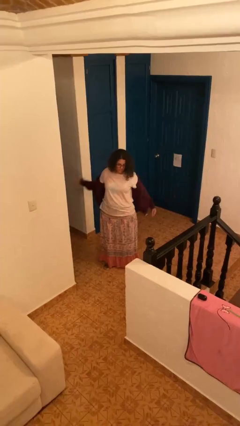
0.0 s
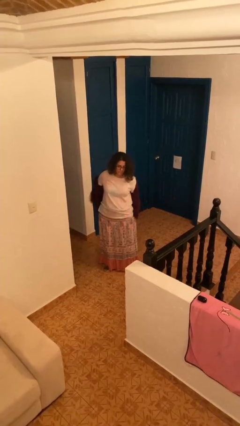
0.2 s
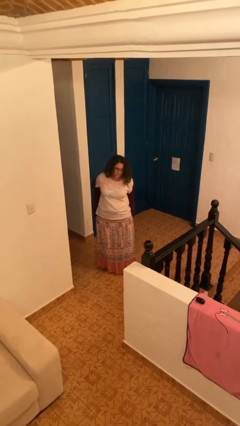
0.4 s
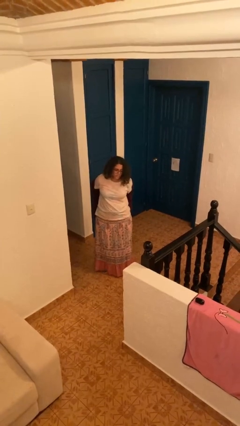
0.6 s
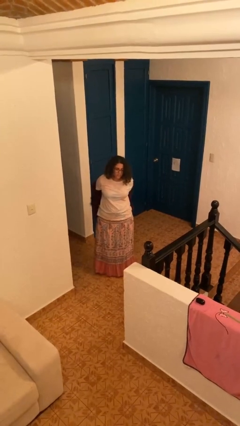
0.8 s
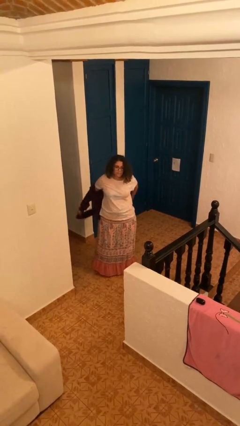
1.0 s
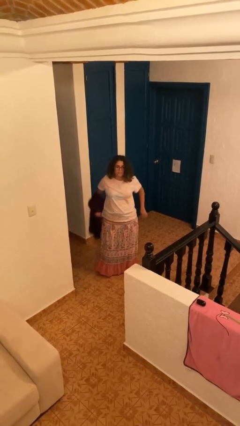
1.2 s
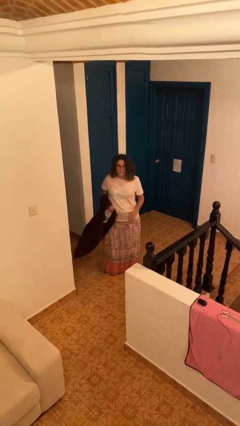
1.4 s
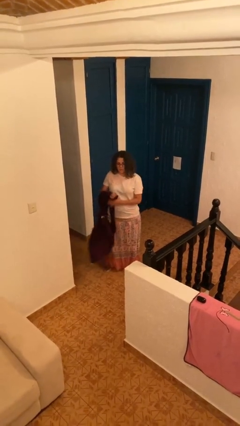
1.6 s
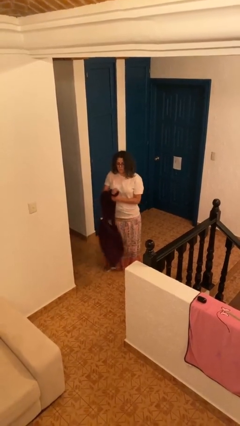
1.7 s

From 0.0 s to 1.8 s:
person takes off jacket

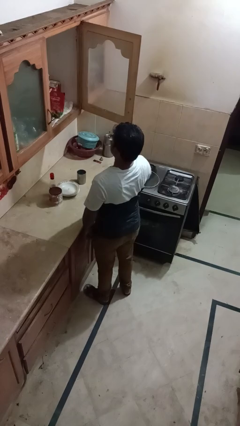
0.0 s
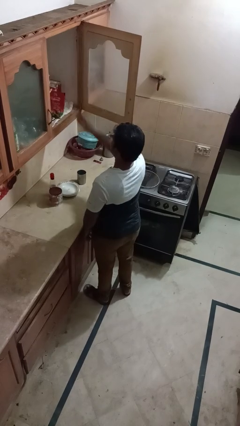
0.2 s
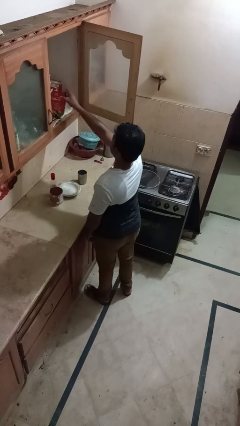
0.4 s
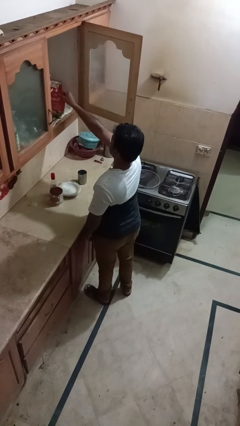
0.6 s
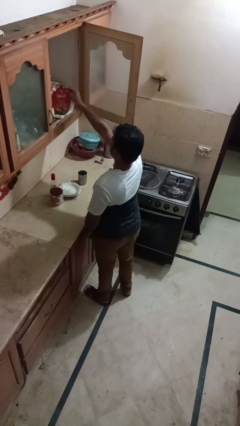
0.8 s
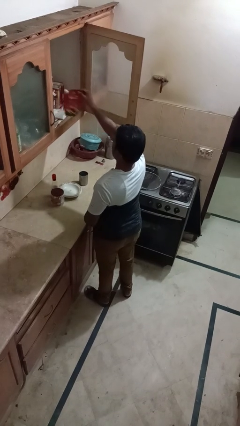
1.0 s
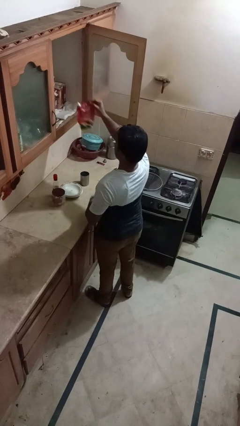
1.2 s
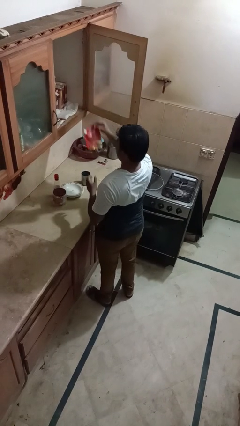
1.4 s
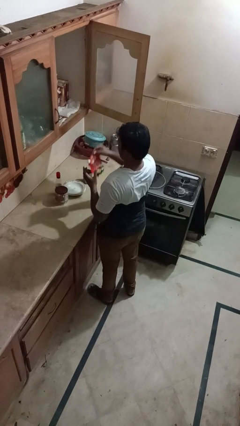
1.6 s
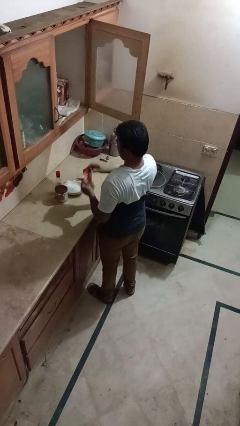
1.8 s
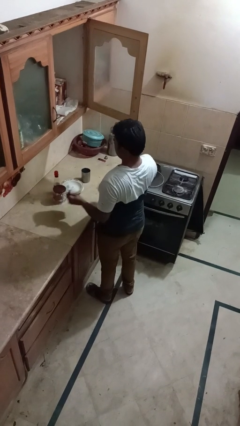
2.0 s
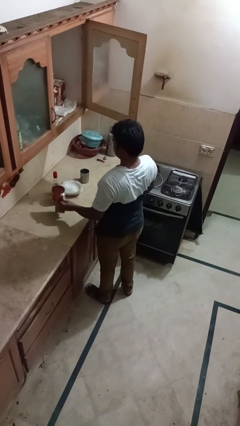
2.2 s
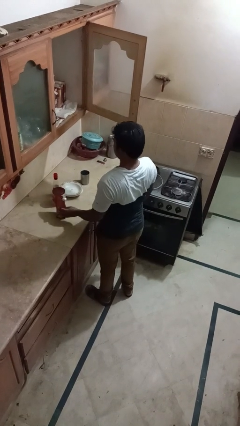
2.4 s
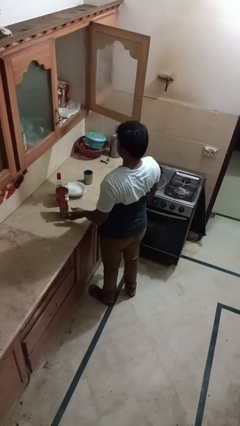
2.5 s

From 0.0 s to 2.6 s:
person takes object from cabinet

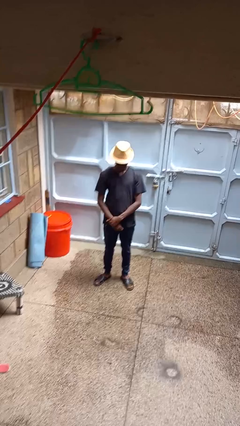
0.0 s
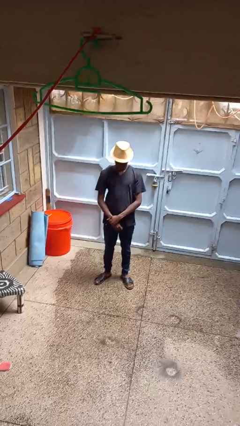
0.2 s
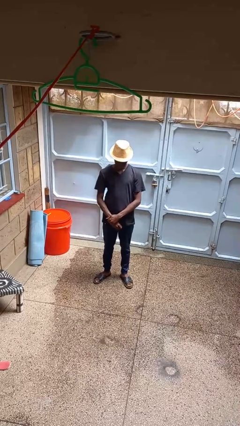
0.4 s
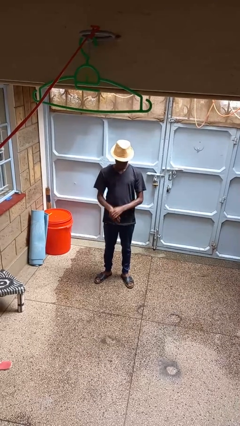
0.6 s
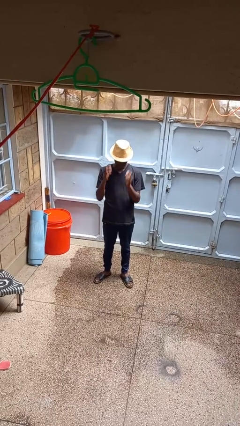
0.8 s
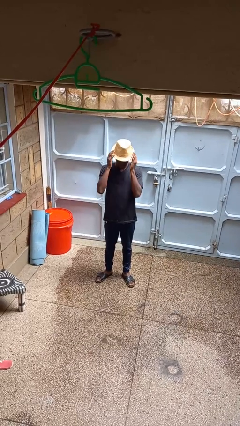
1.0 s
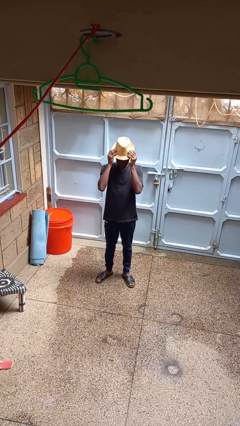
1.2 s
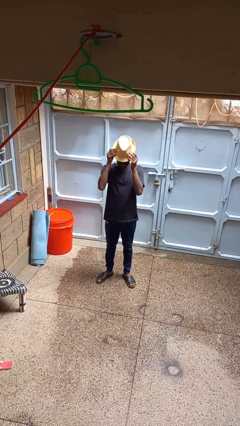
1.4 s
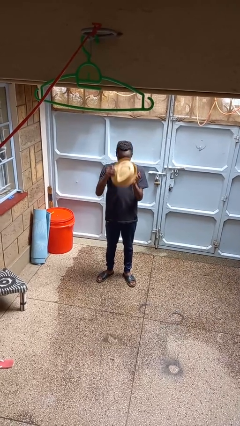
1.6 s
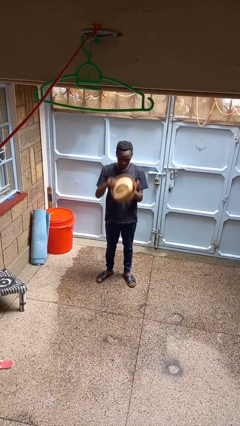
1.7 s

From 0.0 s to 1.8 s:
person takes off hat

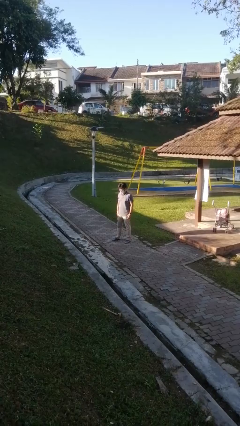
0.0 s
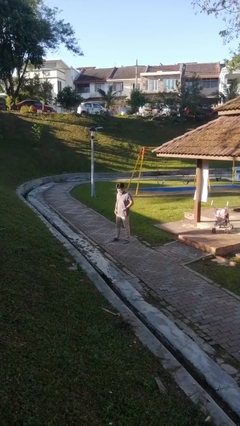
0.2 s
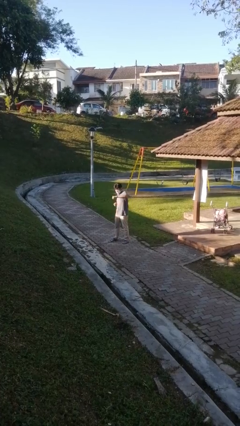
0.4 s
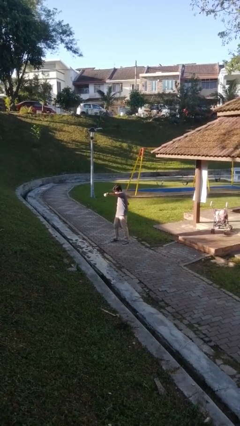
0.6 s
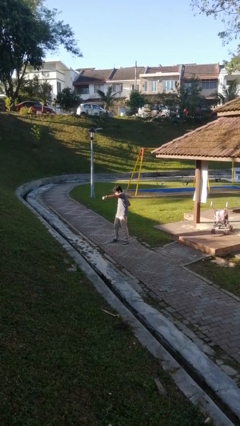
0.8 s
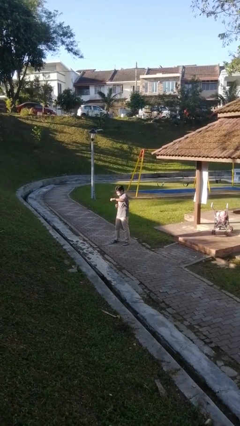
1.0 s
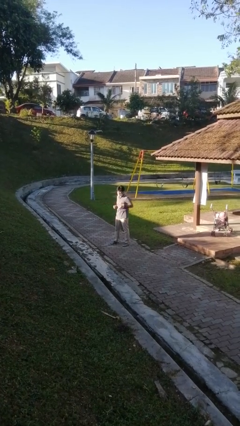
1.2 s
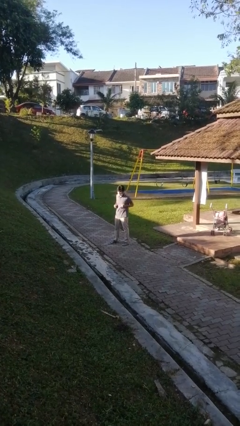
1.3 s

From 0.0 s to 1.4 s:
person punches

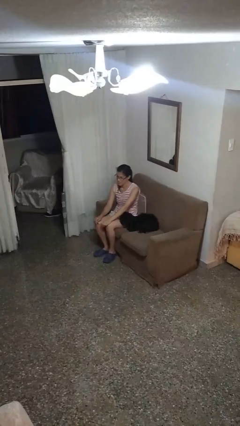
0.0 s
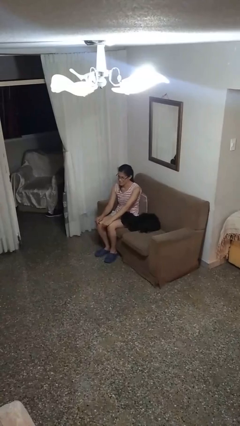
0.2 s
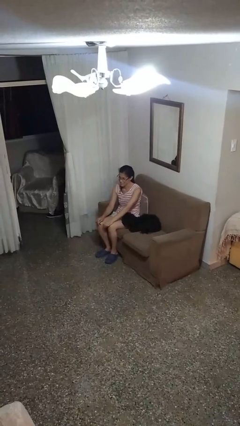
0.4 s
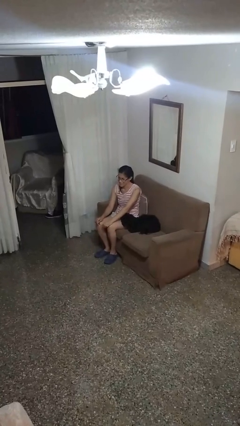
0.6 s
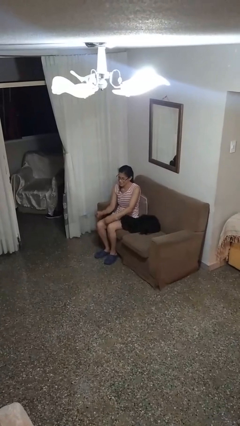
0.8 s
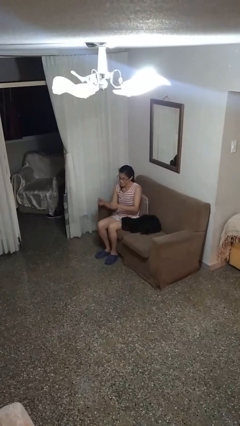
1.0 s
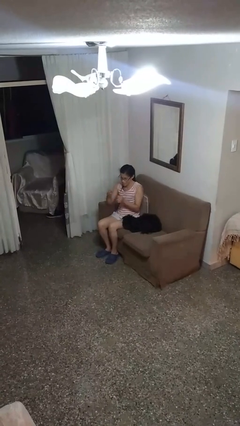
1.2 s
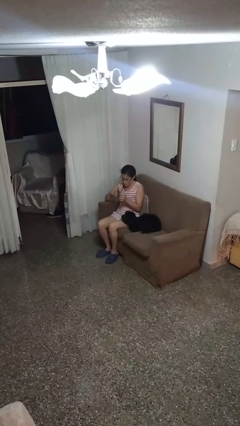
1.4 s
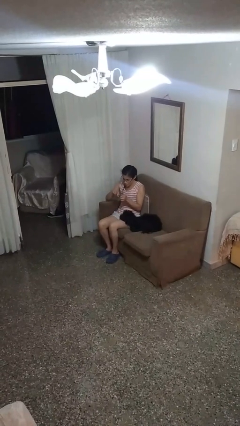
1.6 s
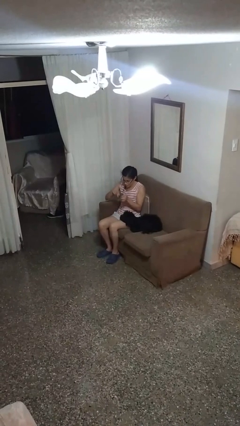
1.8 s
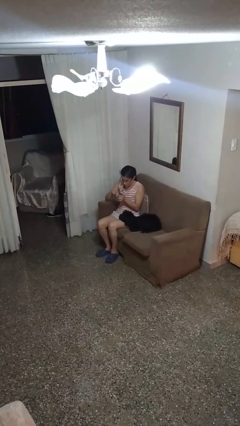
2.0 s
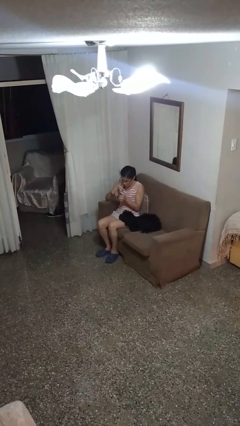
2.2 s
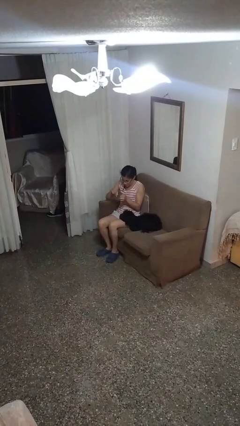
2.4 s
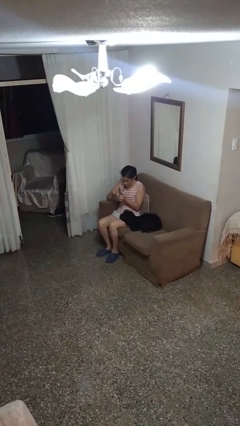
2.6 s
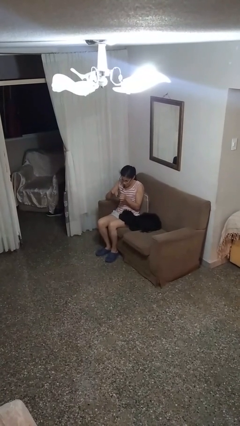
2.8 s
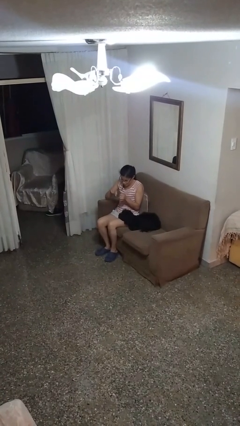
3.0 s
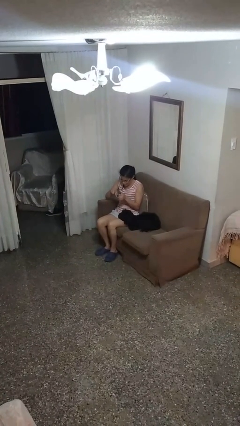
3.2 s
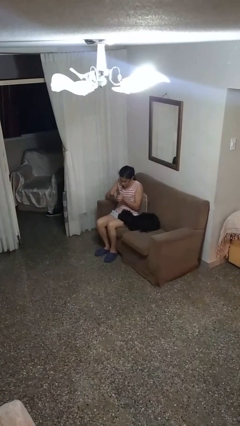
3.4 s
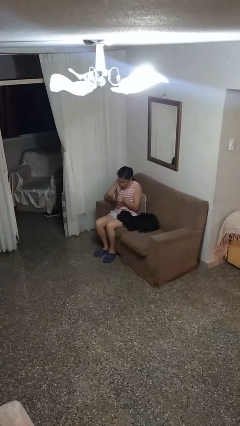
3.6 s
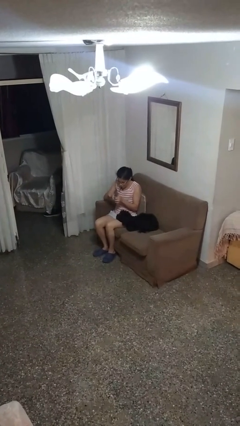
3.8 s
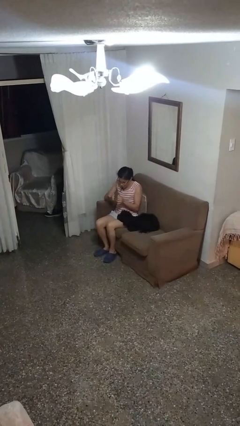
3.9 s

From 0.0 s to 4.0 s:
person files fingernails

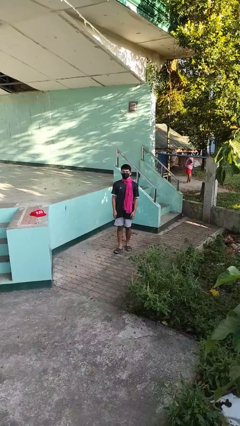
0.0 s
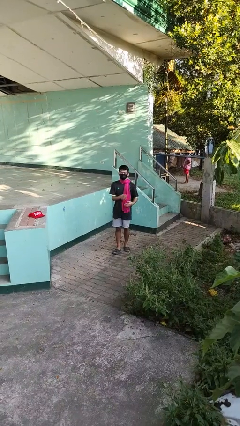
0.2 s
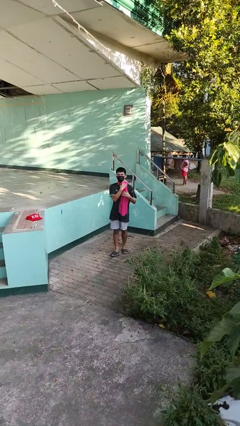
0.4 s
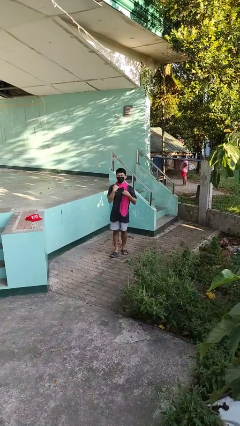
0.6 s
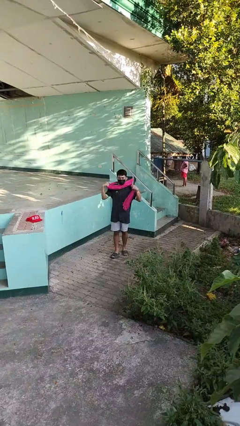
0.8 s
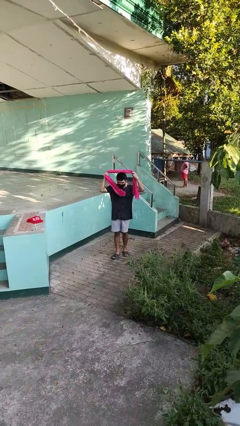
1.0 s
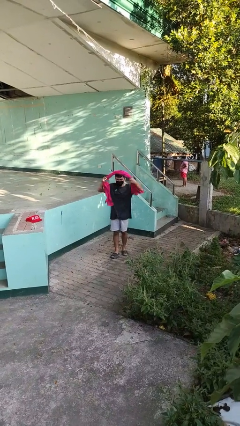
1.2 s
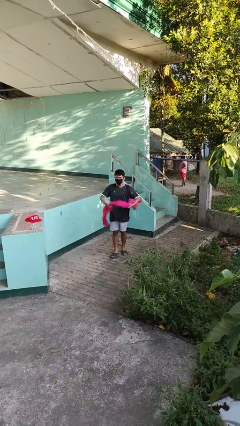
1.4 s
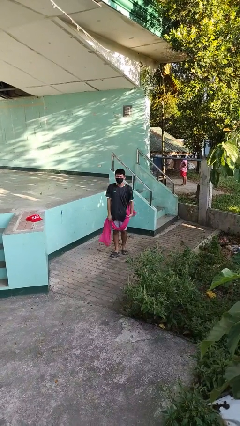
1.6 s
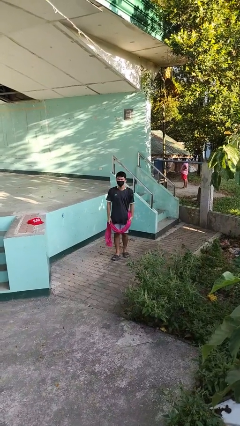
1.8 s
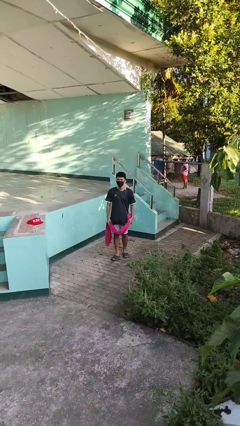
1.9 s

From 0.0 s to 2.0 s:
person takes off scarf

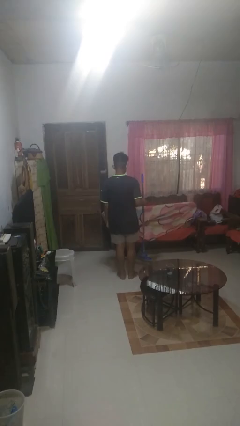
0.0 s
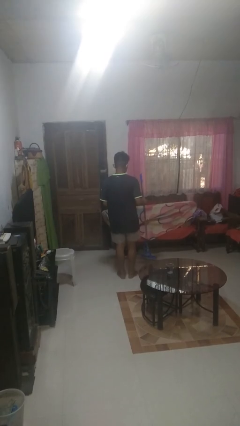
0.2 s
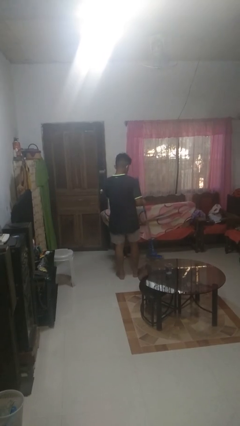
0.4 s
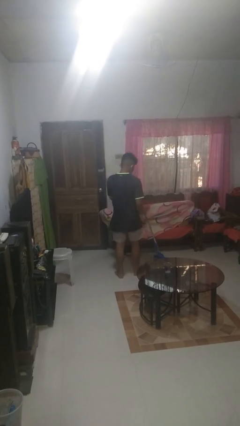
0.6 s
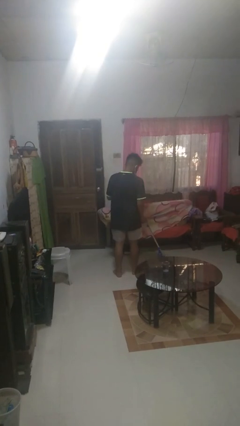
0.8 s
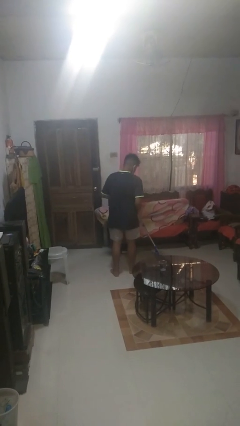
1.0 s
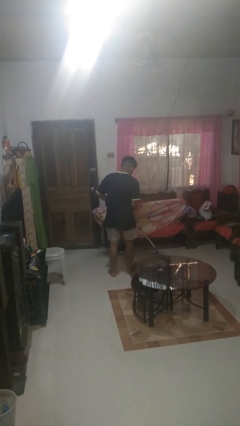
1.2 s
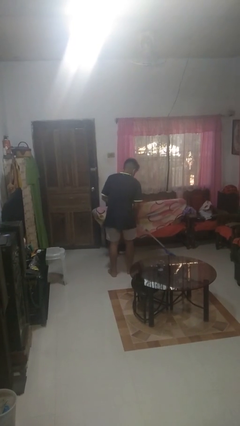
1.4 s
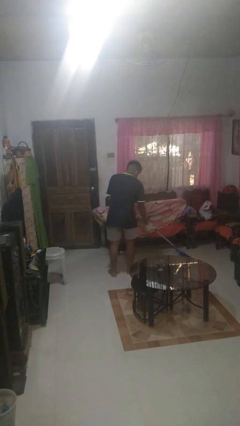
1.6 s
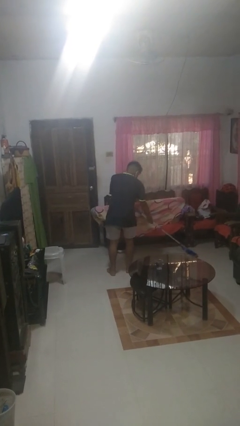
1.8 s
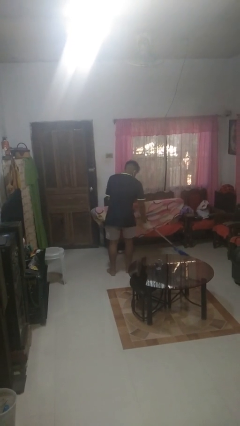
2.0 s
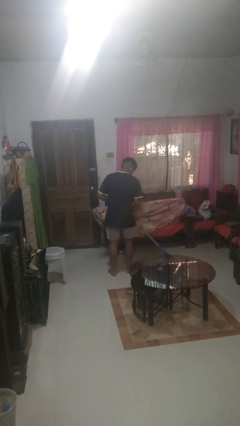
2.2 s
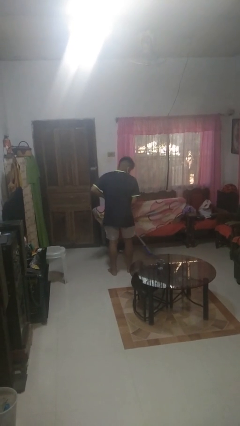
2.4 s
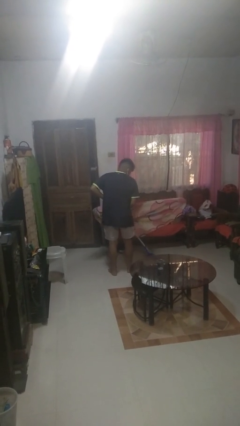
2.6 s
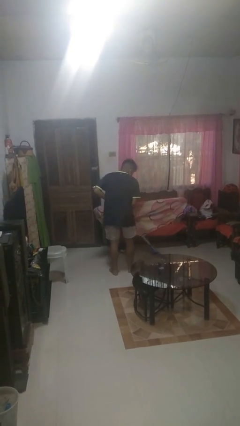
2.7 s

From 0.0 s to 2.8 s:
person mops

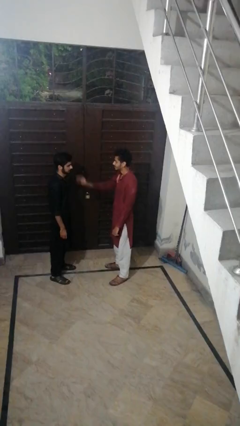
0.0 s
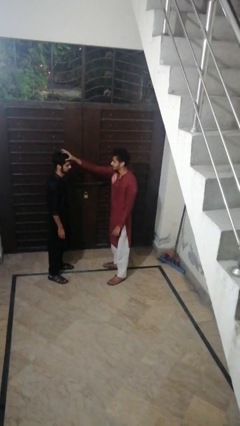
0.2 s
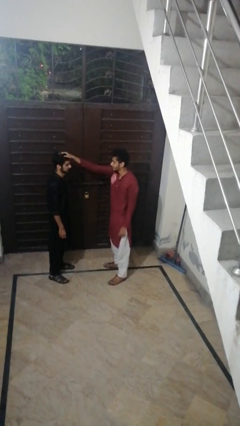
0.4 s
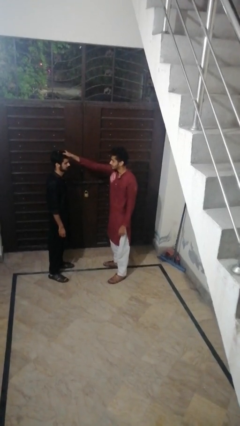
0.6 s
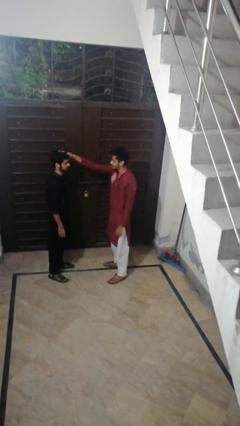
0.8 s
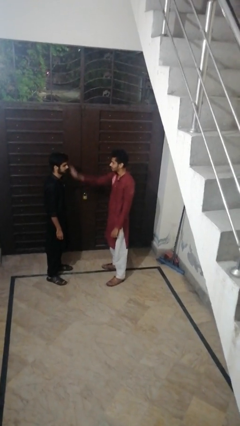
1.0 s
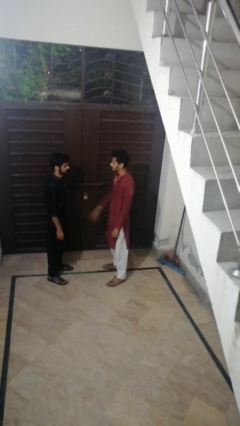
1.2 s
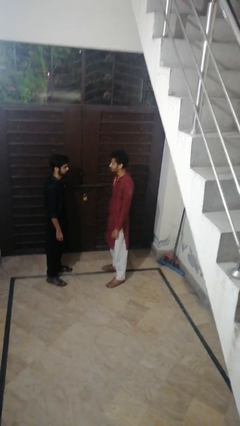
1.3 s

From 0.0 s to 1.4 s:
person grabs person by hair
